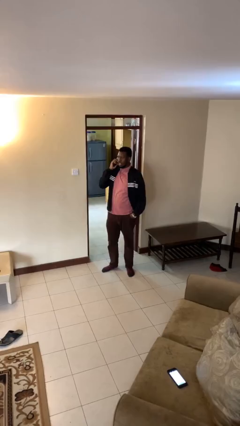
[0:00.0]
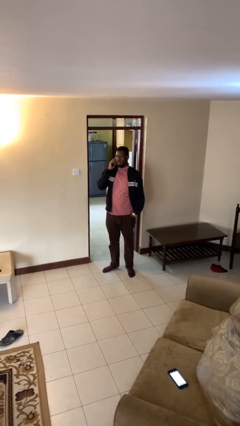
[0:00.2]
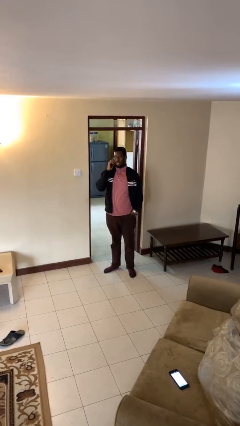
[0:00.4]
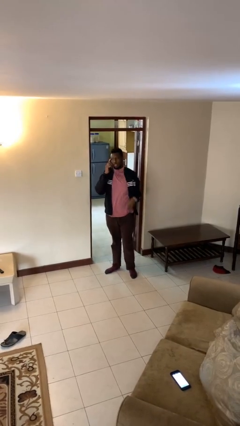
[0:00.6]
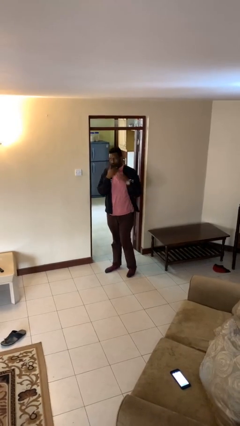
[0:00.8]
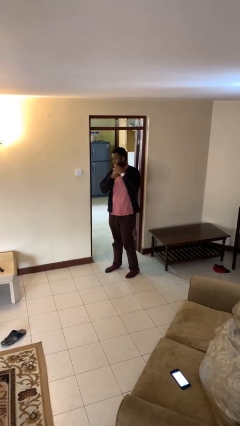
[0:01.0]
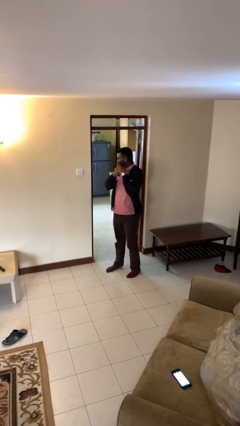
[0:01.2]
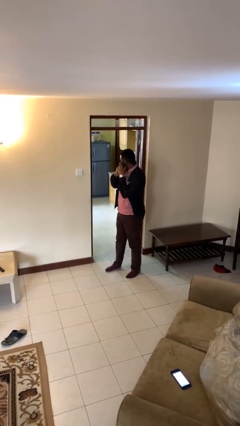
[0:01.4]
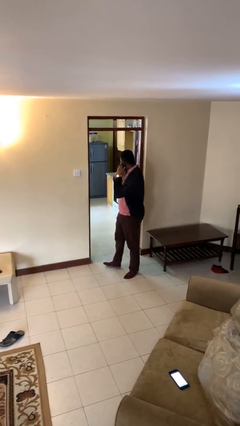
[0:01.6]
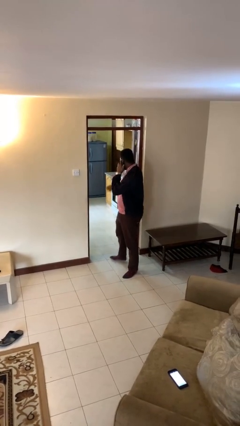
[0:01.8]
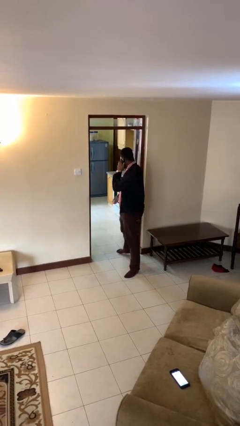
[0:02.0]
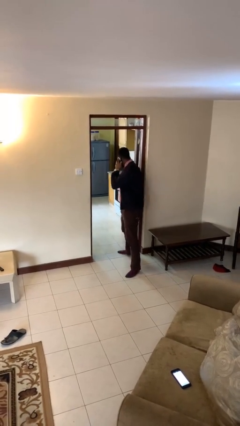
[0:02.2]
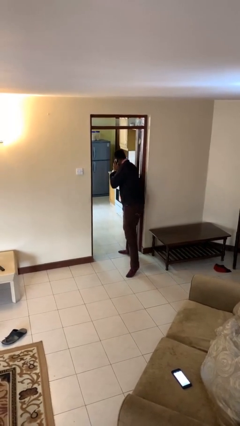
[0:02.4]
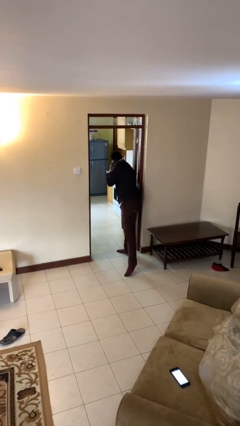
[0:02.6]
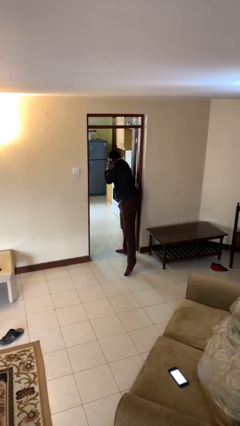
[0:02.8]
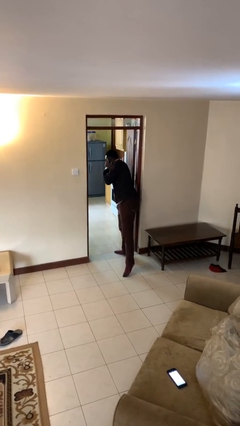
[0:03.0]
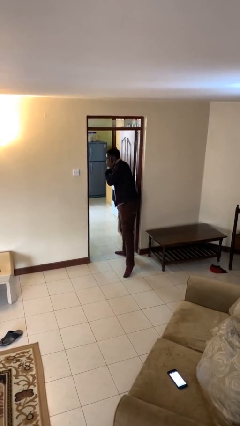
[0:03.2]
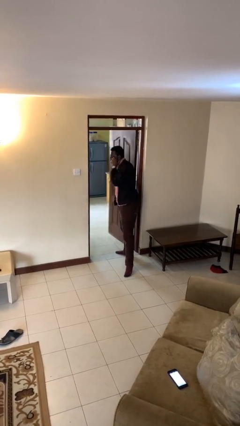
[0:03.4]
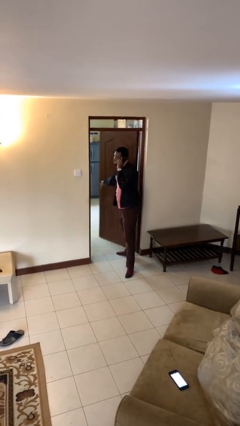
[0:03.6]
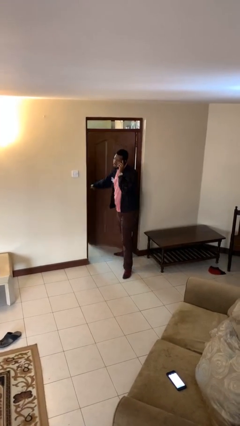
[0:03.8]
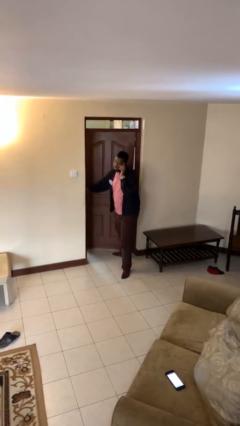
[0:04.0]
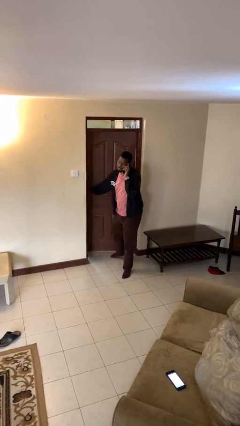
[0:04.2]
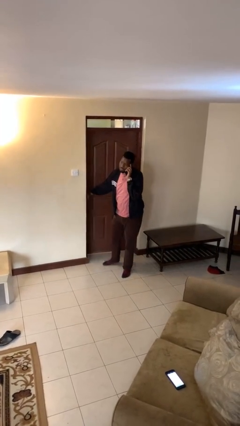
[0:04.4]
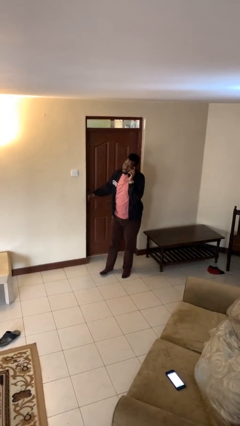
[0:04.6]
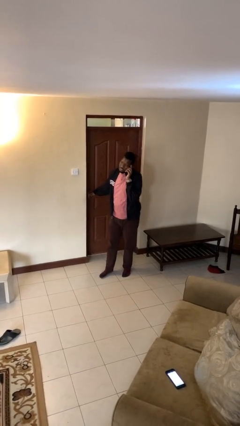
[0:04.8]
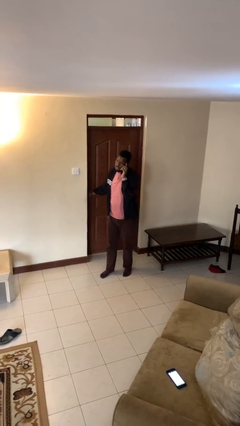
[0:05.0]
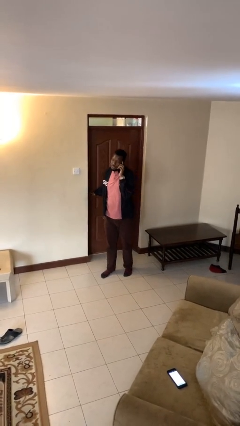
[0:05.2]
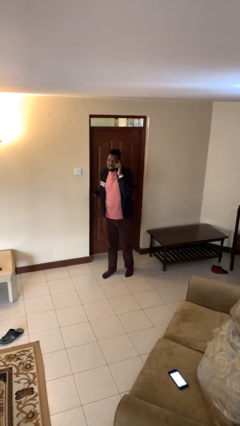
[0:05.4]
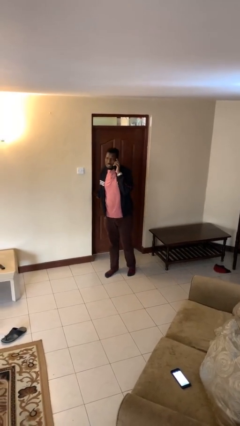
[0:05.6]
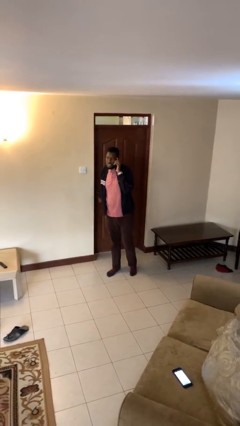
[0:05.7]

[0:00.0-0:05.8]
person closes facility door

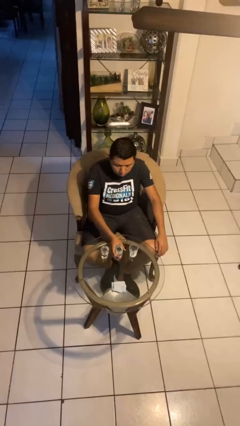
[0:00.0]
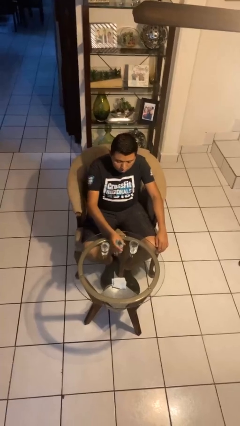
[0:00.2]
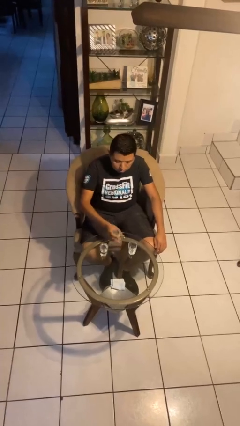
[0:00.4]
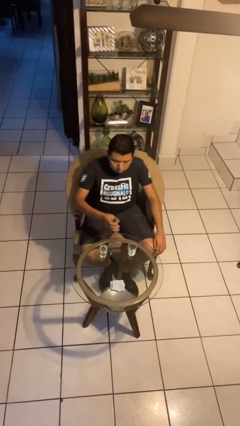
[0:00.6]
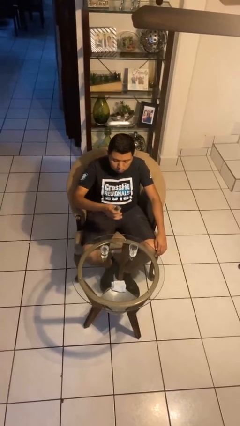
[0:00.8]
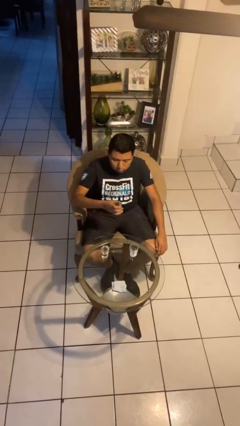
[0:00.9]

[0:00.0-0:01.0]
person picks up object from table

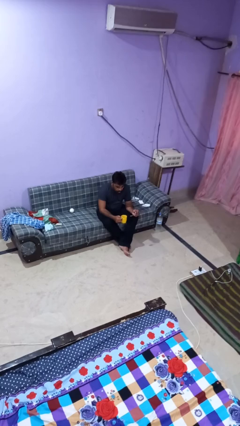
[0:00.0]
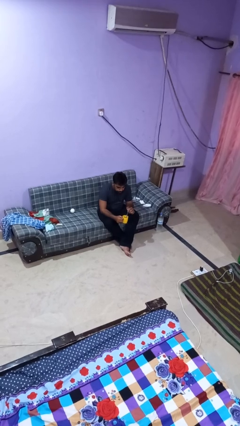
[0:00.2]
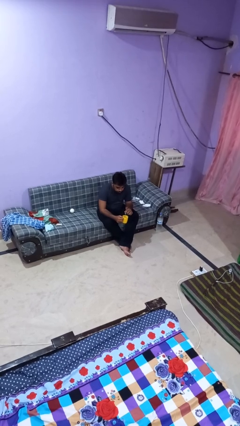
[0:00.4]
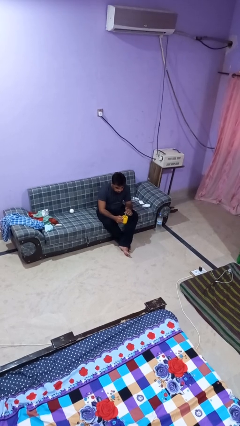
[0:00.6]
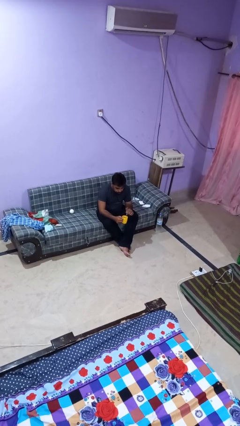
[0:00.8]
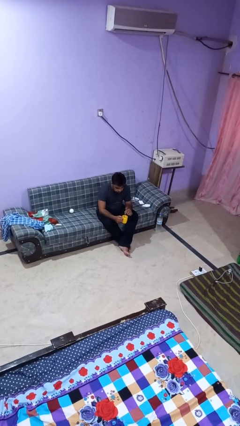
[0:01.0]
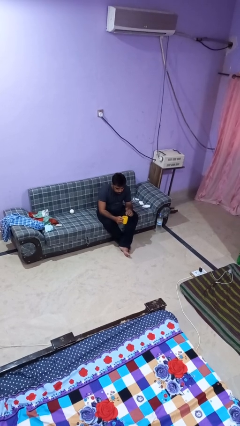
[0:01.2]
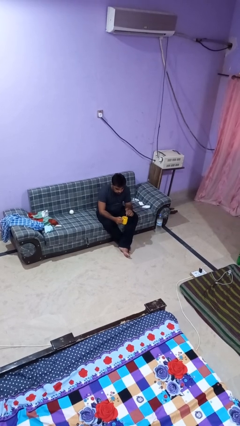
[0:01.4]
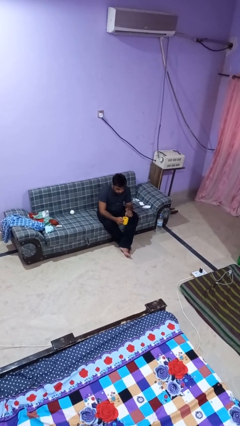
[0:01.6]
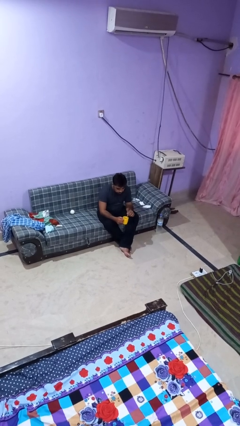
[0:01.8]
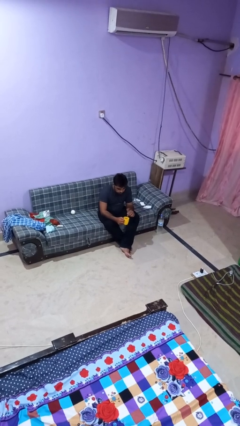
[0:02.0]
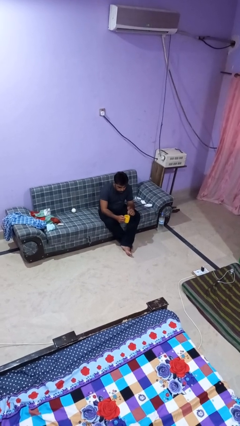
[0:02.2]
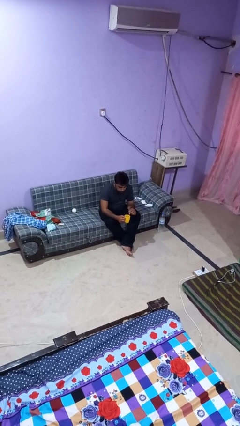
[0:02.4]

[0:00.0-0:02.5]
person stirs mug

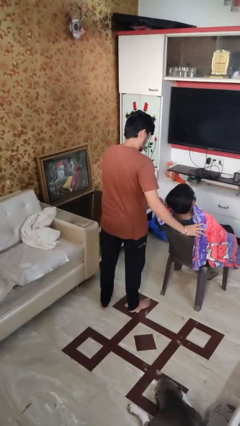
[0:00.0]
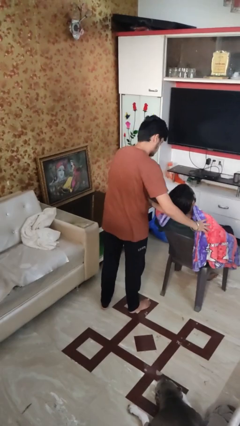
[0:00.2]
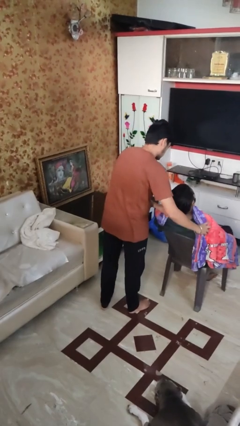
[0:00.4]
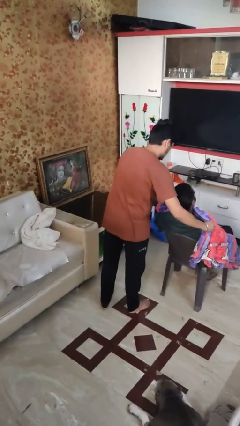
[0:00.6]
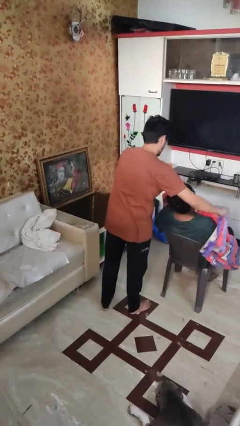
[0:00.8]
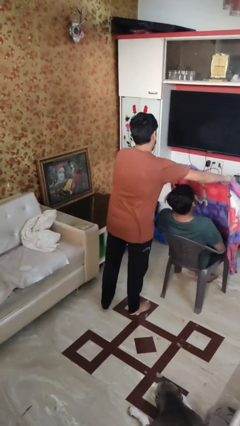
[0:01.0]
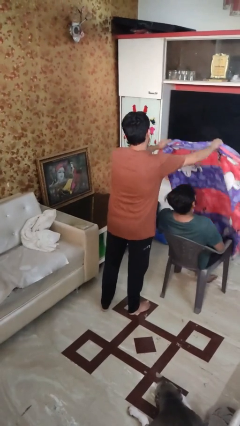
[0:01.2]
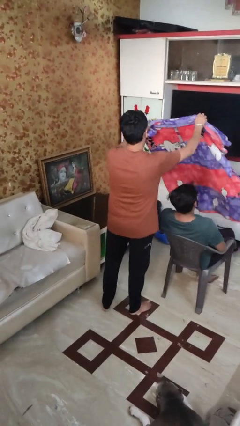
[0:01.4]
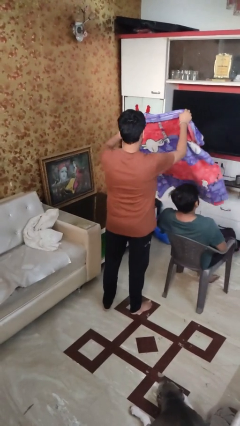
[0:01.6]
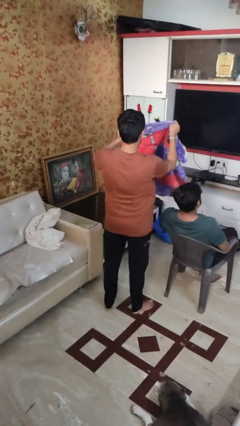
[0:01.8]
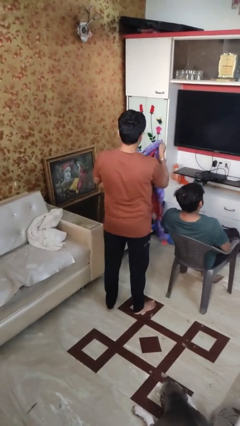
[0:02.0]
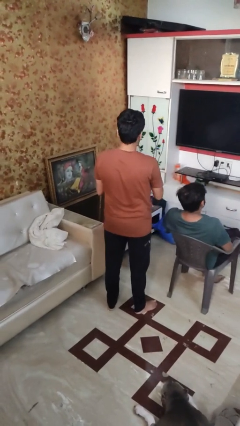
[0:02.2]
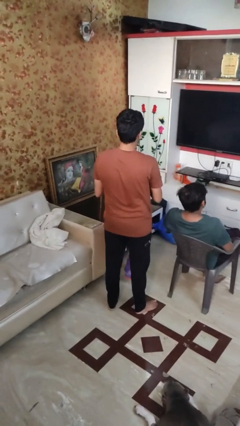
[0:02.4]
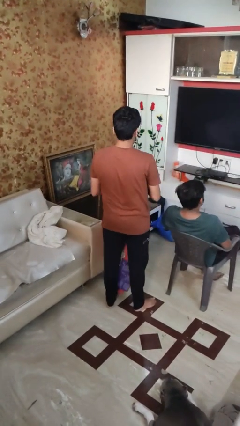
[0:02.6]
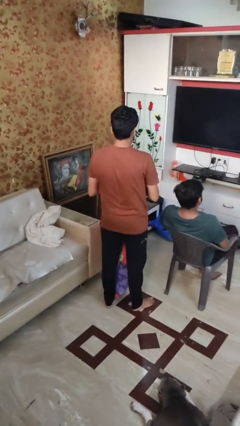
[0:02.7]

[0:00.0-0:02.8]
person uncovers friend with blanket

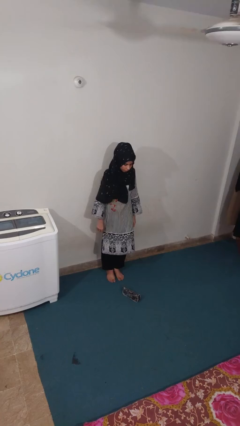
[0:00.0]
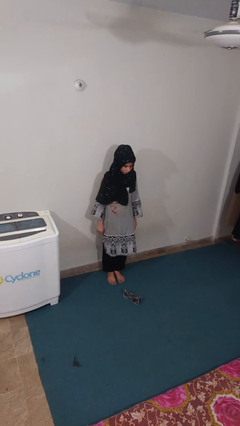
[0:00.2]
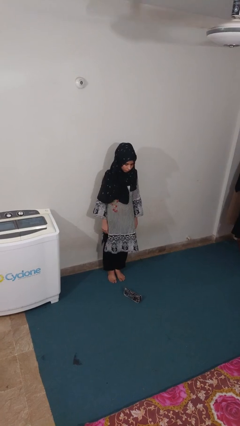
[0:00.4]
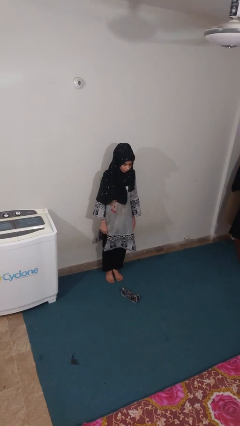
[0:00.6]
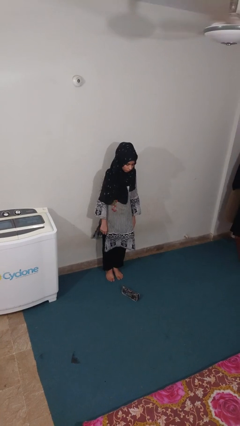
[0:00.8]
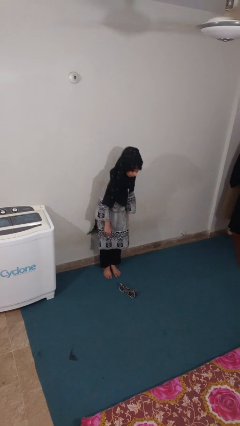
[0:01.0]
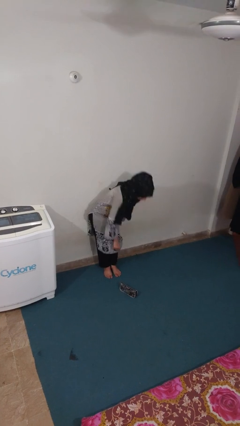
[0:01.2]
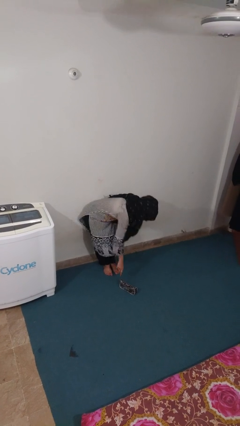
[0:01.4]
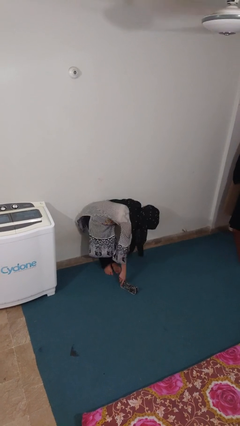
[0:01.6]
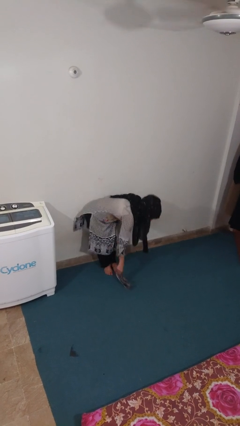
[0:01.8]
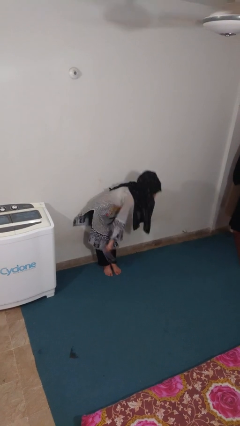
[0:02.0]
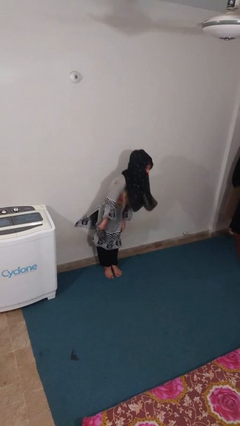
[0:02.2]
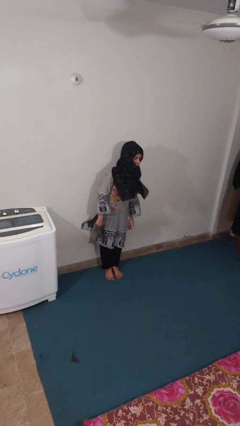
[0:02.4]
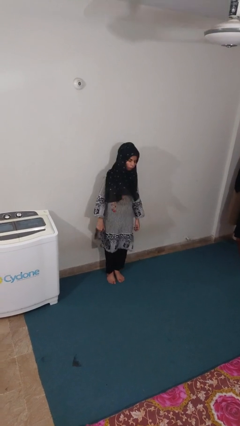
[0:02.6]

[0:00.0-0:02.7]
person picks up object from floor

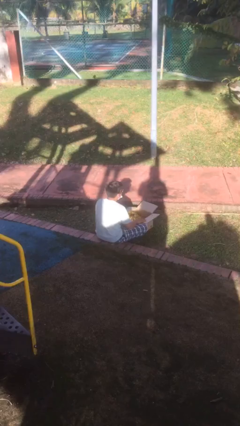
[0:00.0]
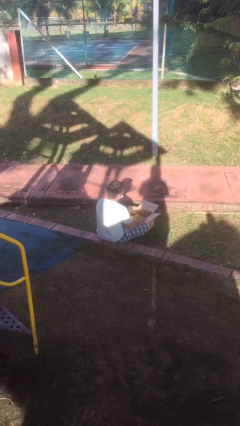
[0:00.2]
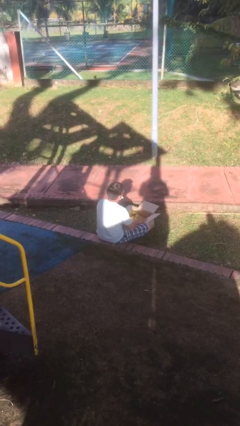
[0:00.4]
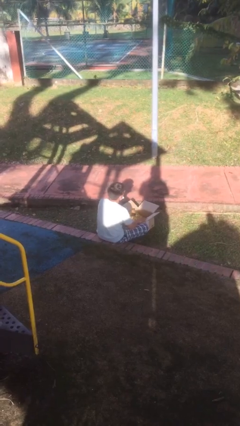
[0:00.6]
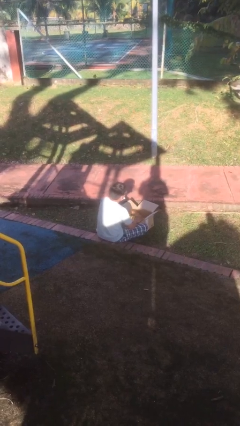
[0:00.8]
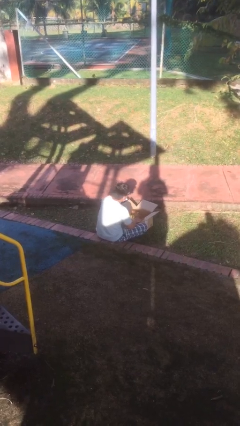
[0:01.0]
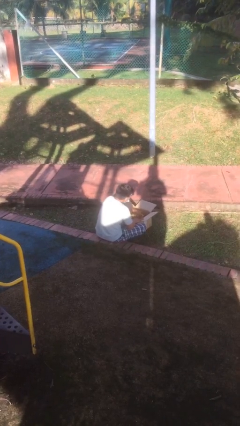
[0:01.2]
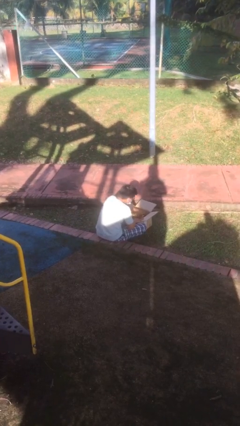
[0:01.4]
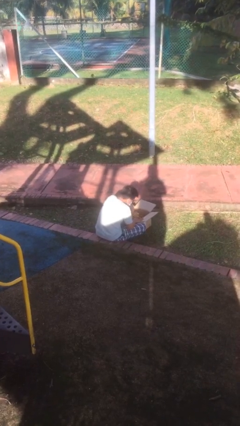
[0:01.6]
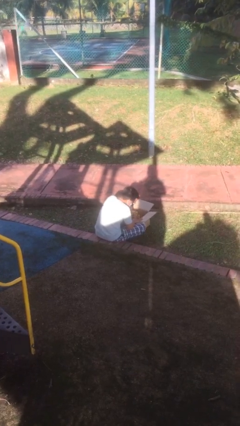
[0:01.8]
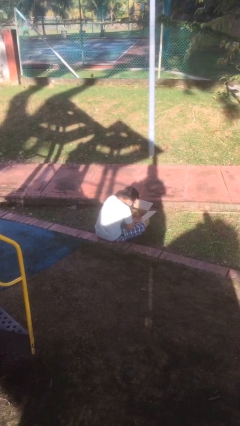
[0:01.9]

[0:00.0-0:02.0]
person searches in box

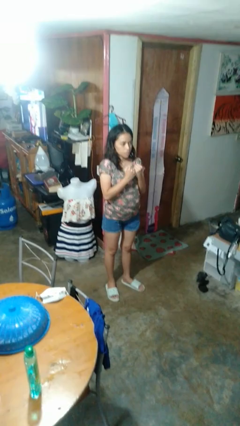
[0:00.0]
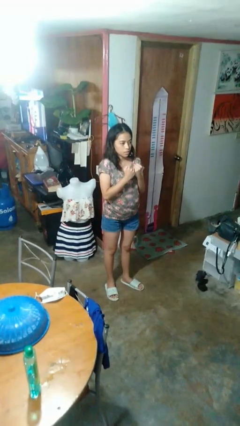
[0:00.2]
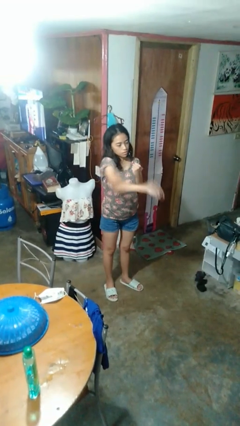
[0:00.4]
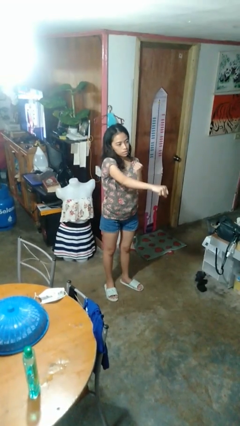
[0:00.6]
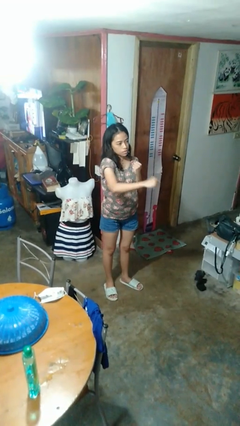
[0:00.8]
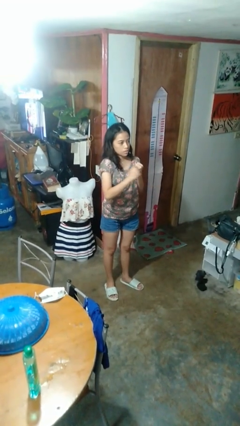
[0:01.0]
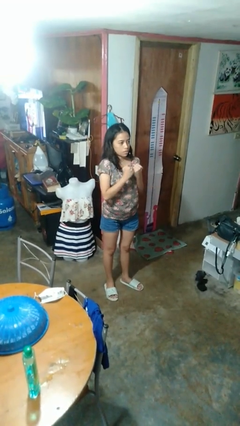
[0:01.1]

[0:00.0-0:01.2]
person punches
